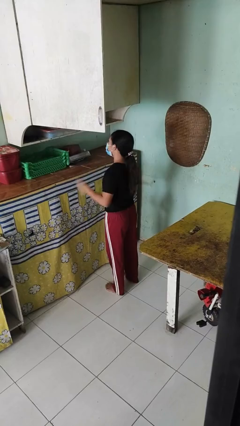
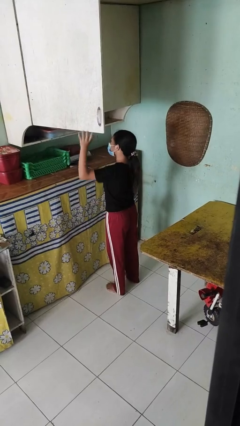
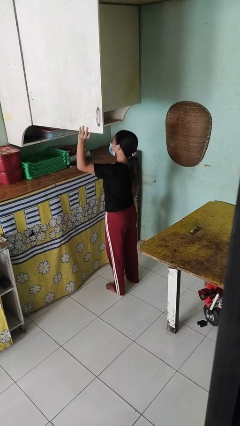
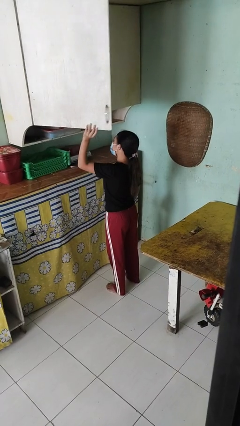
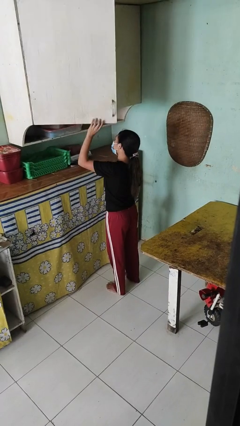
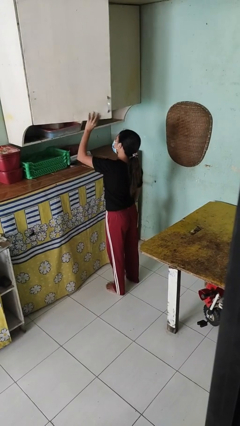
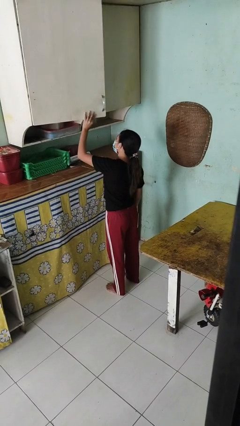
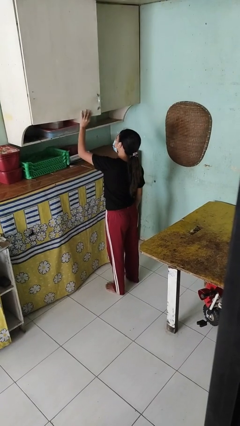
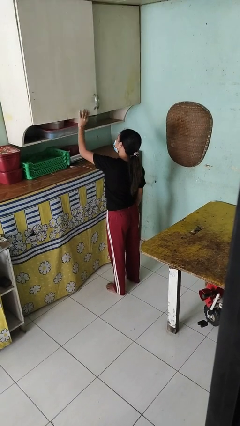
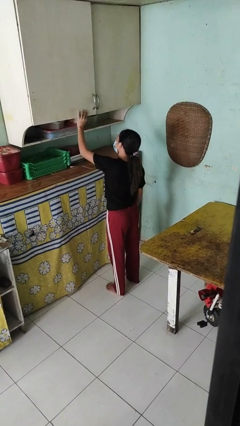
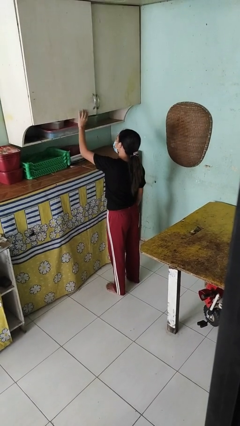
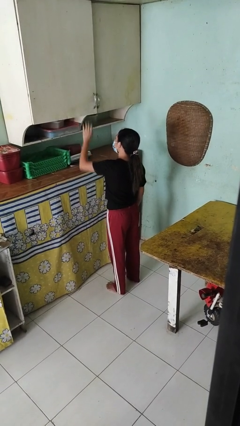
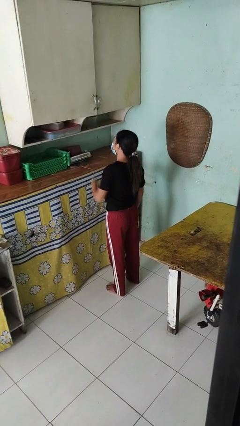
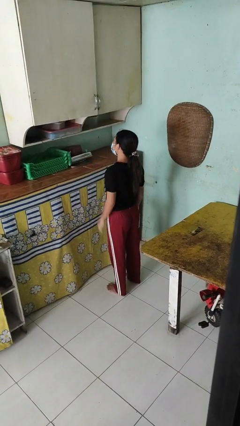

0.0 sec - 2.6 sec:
person closes cabinet

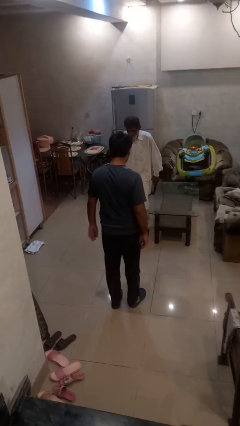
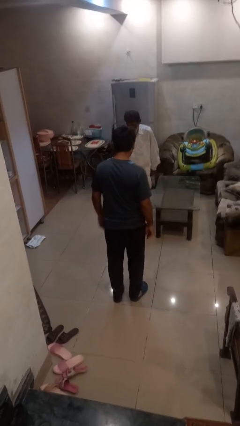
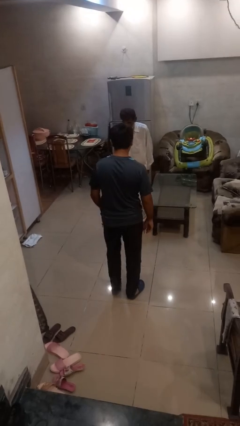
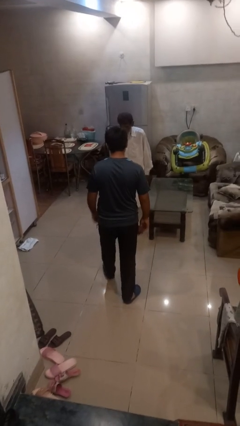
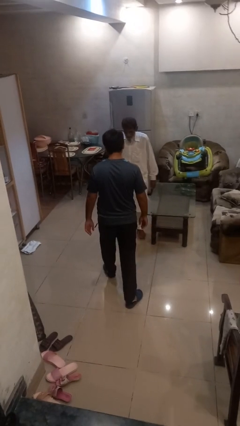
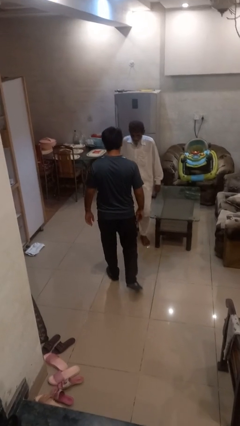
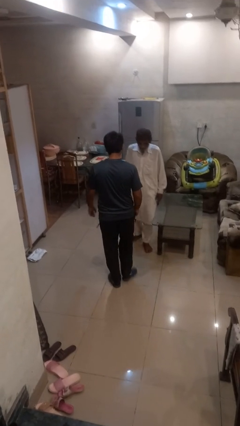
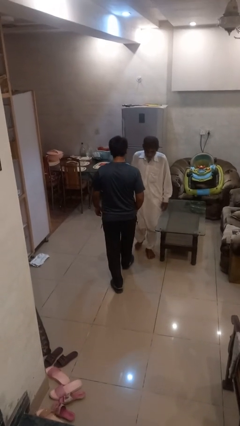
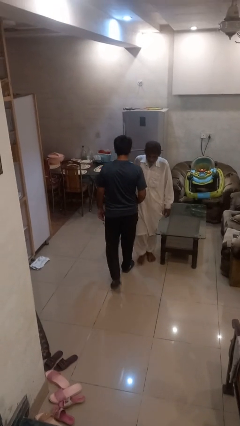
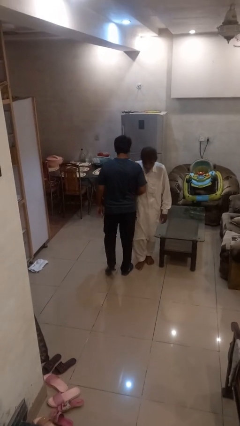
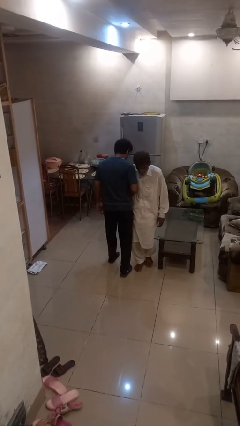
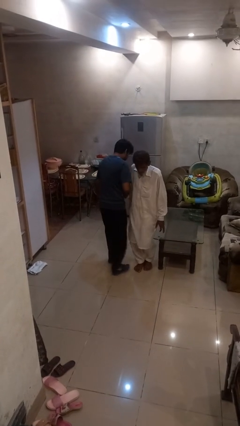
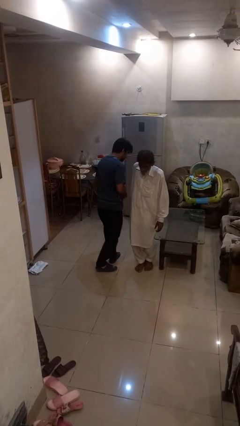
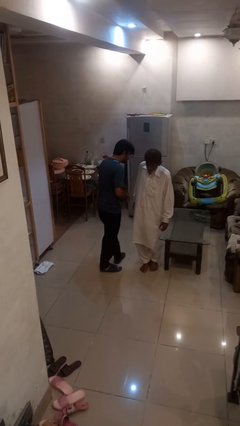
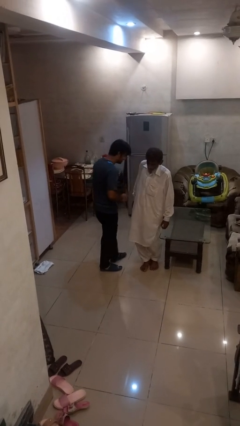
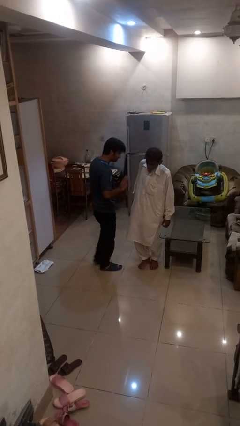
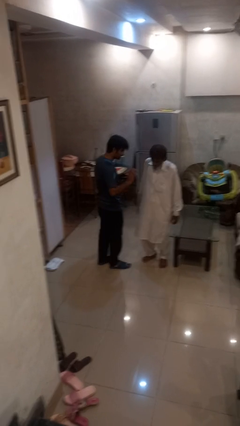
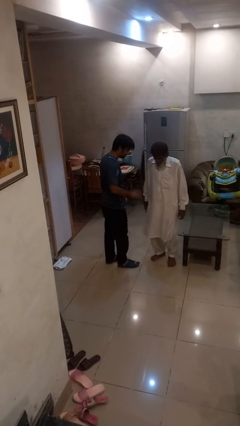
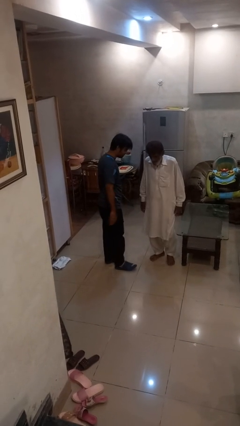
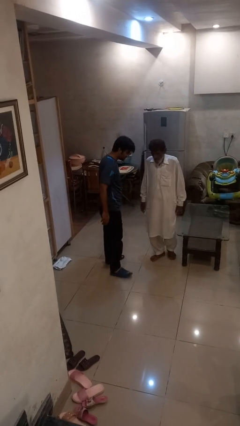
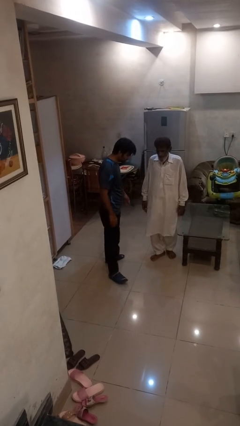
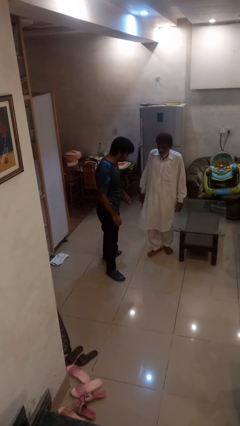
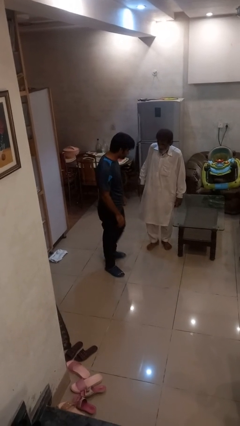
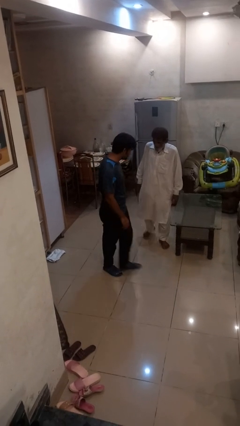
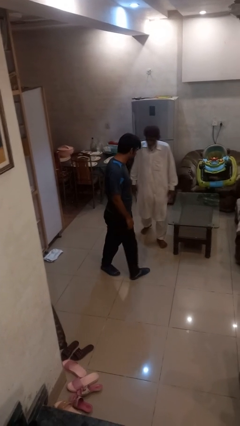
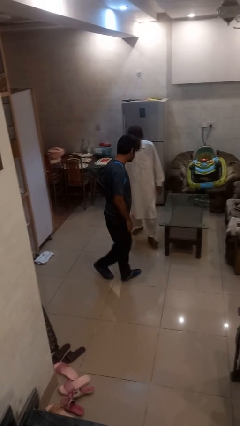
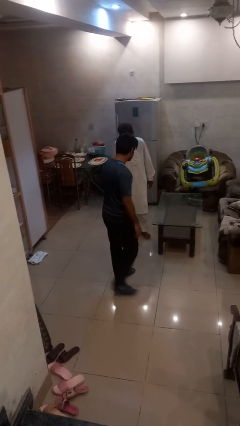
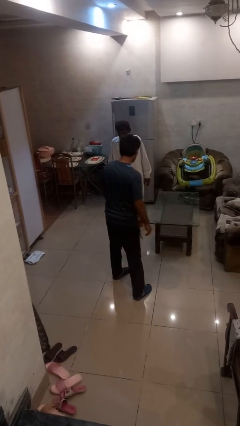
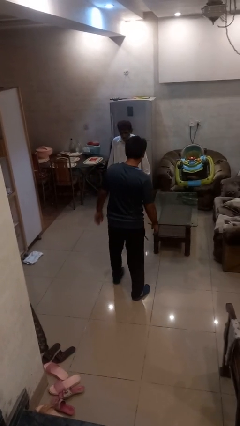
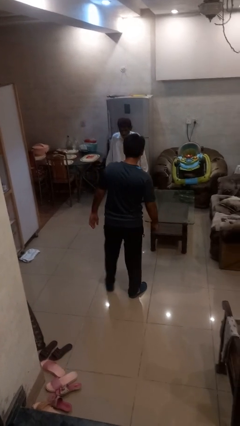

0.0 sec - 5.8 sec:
person bumps into person

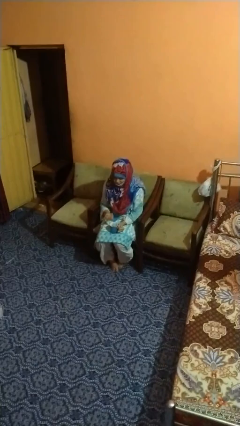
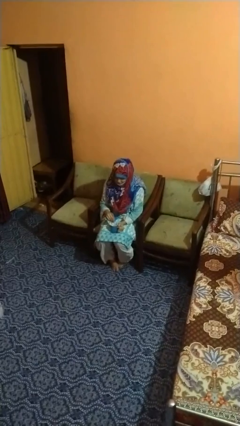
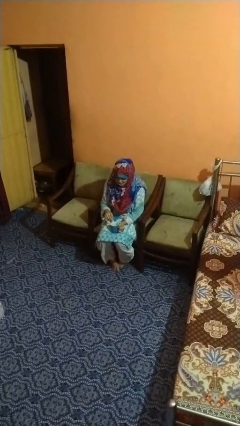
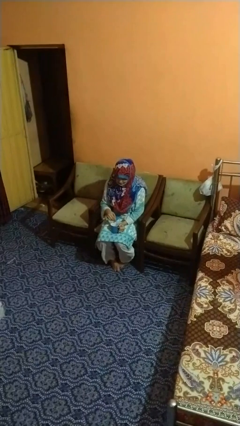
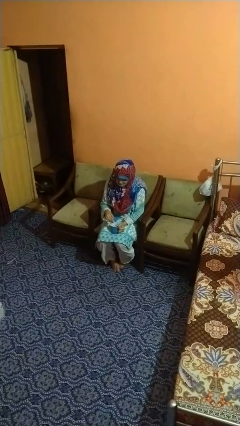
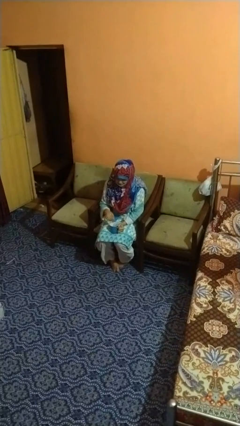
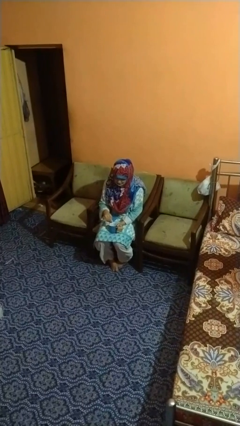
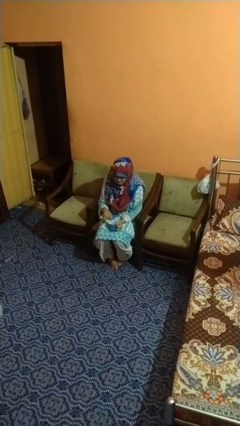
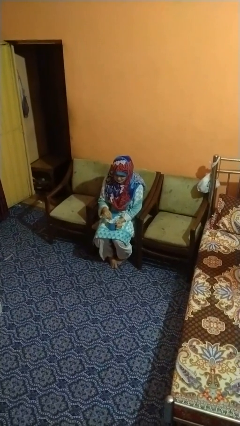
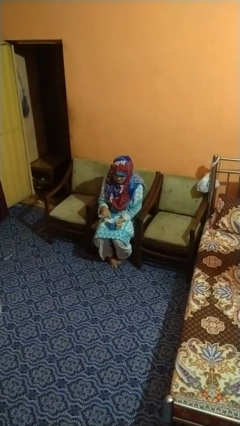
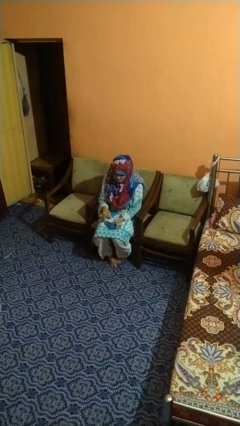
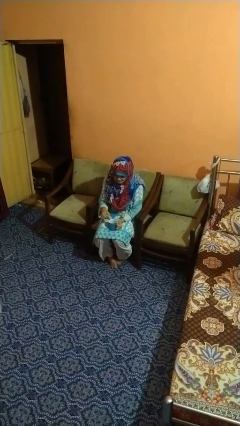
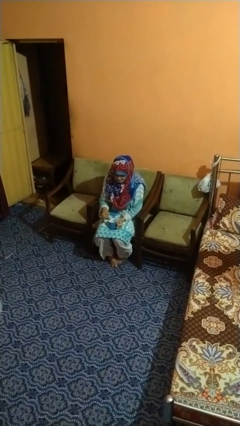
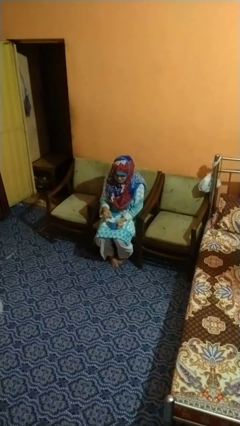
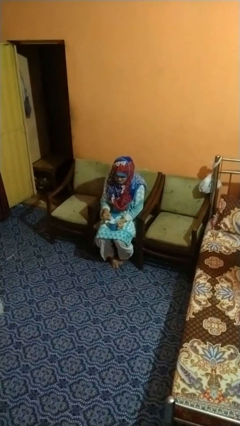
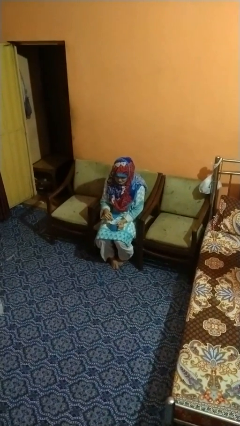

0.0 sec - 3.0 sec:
person stirs mug

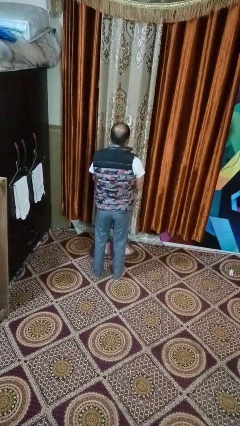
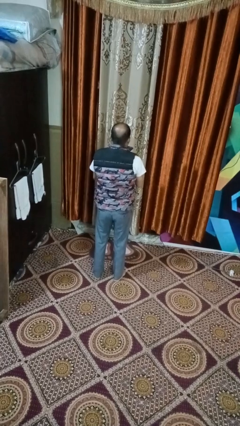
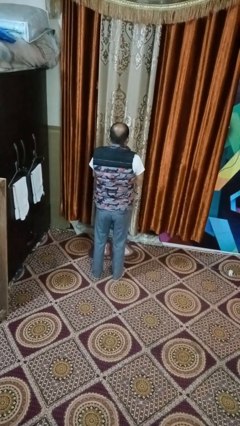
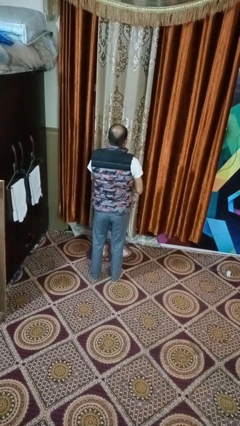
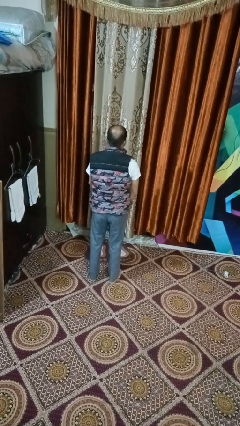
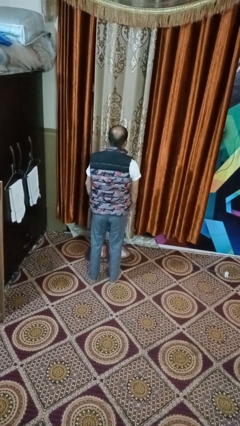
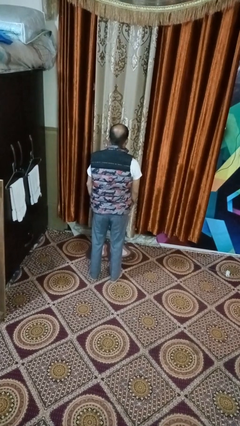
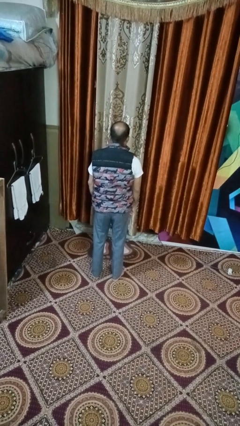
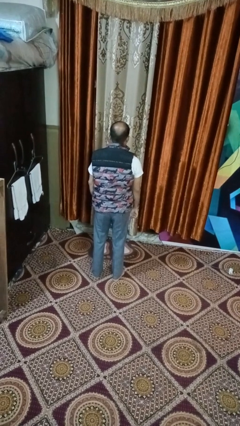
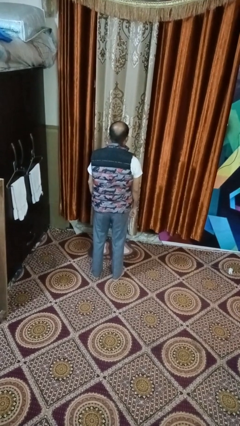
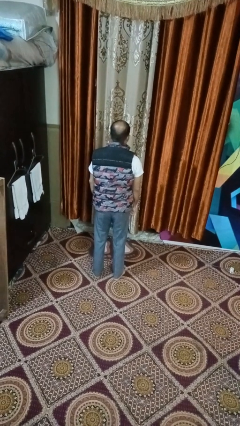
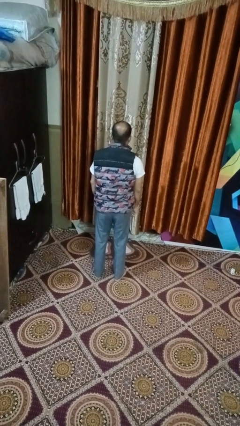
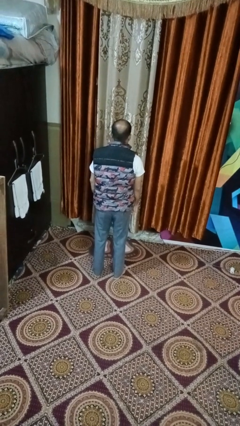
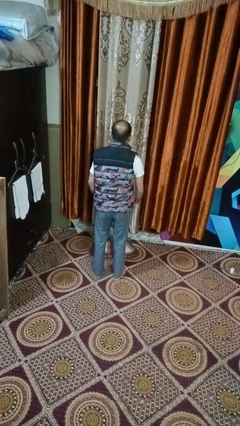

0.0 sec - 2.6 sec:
person unzips jacket

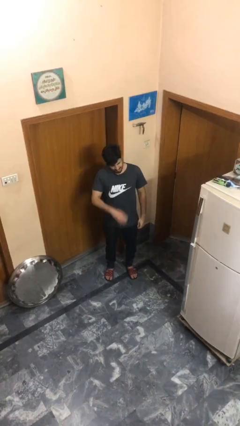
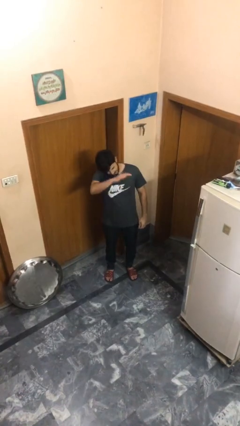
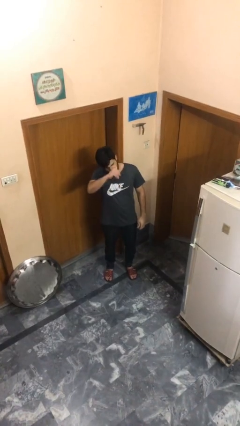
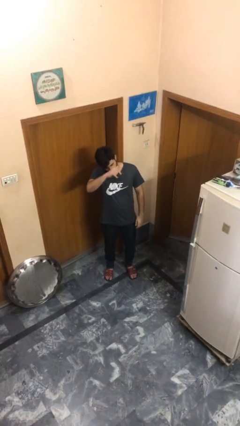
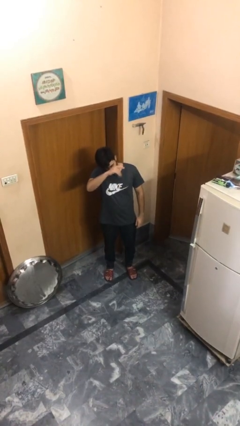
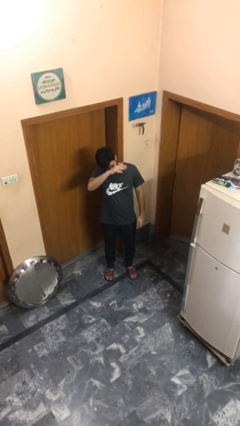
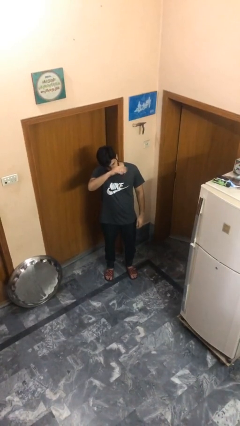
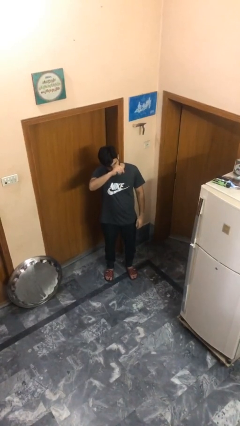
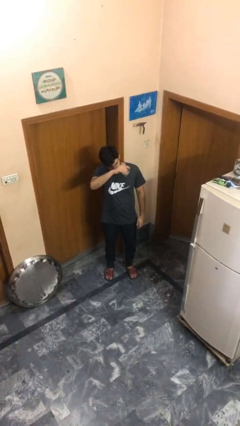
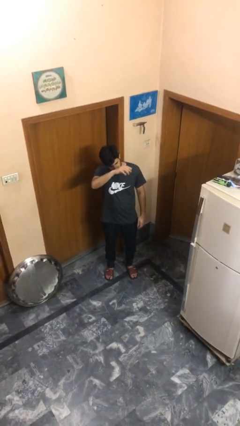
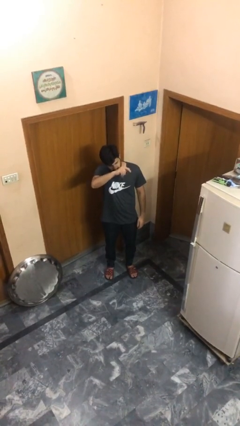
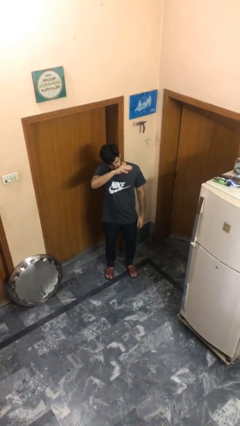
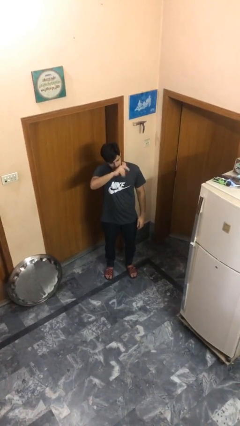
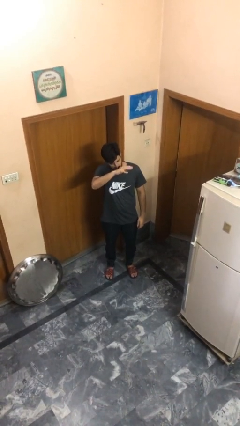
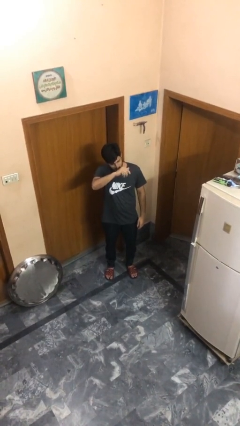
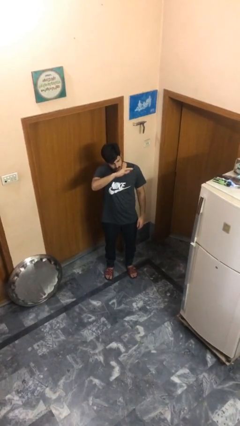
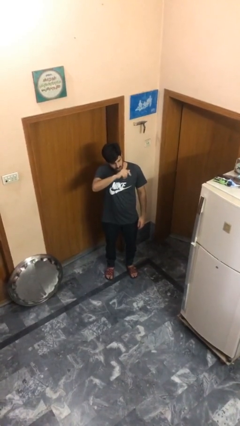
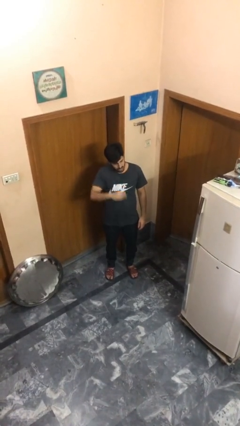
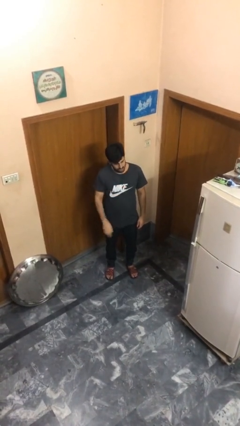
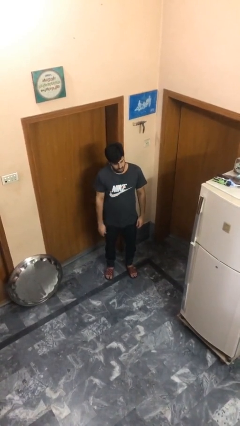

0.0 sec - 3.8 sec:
person gestures come here
